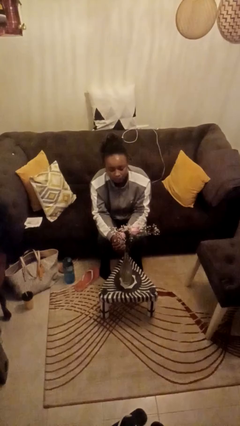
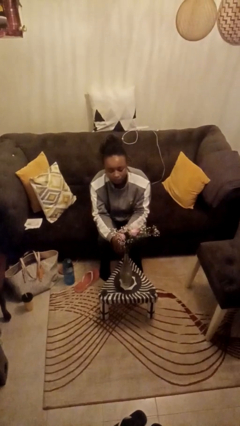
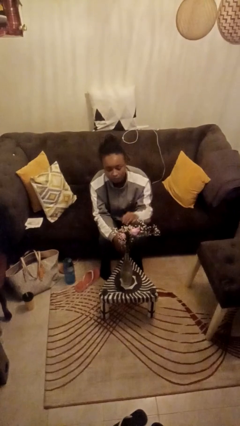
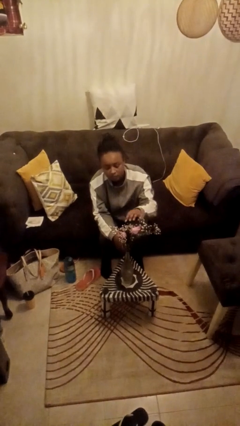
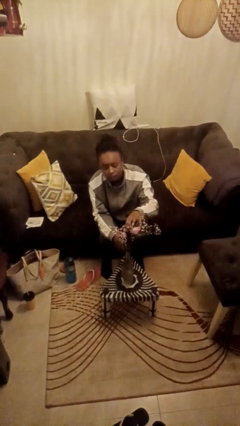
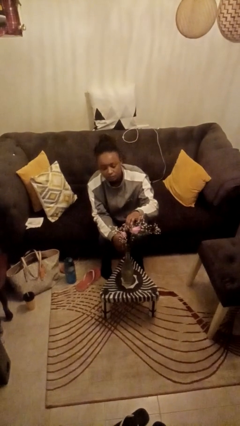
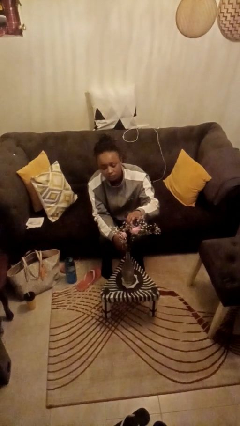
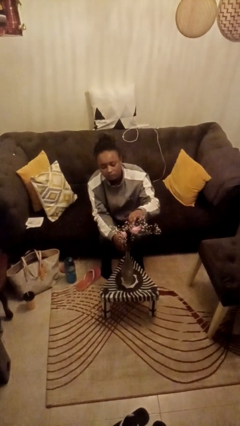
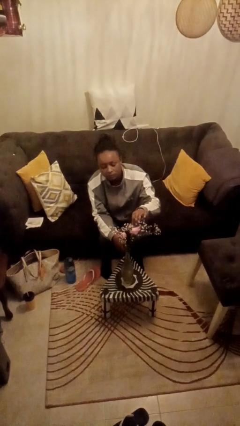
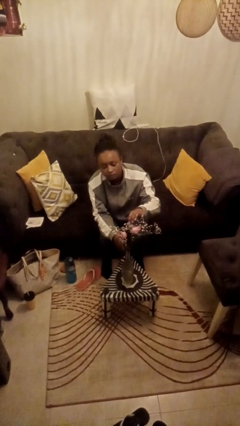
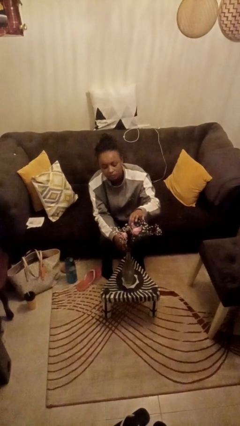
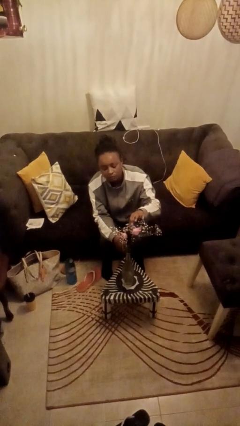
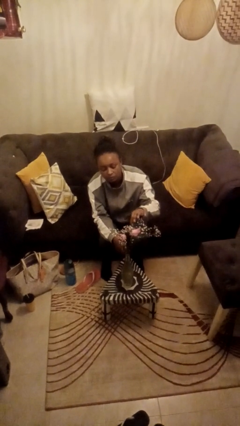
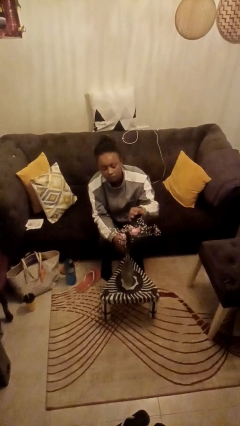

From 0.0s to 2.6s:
person arranges flowers in vase

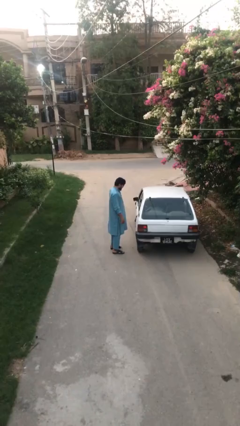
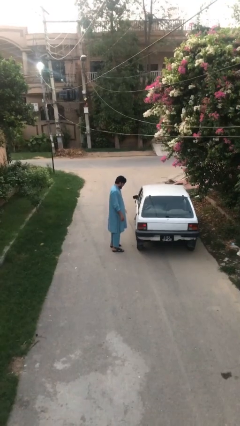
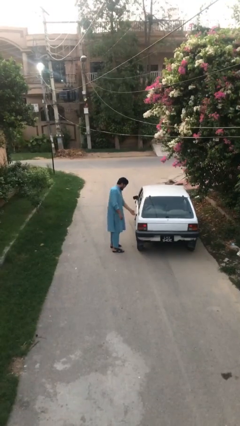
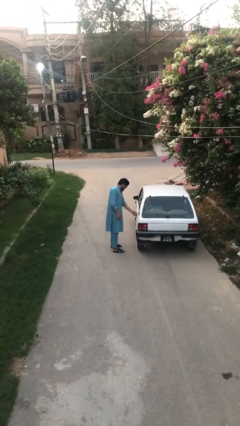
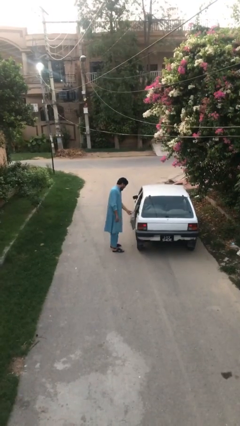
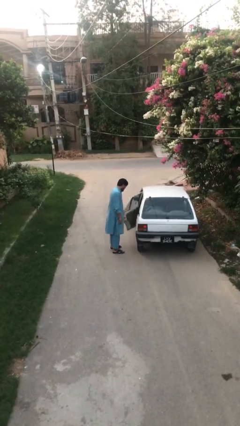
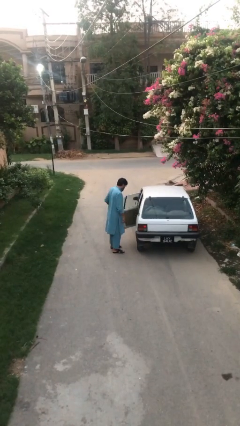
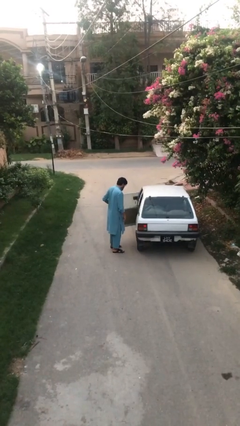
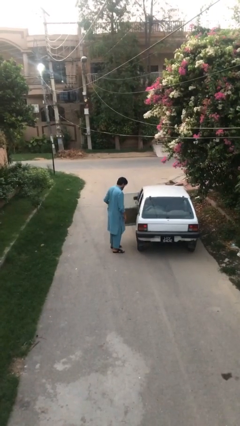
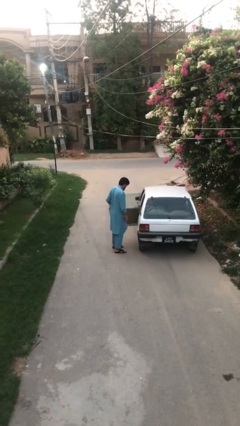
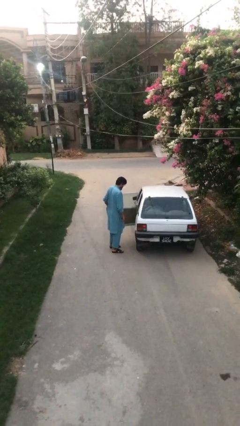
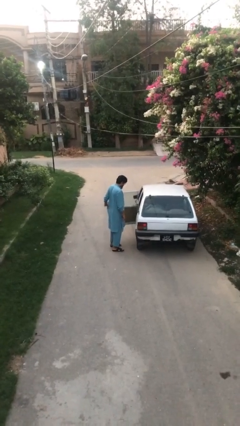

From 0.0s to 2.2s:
person opens car door

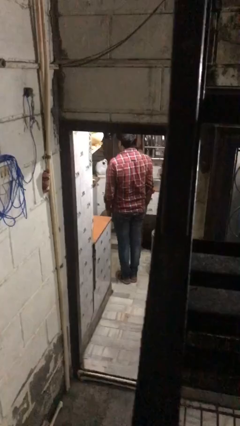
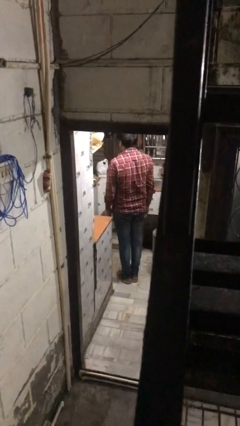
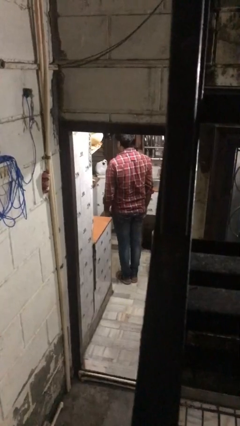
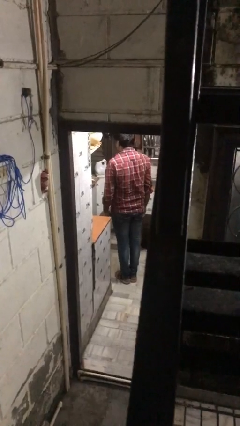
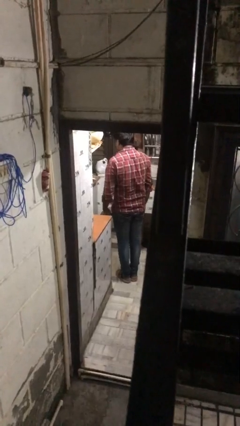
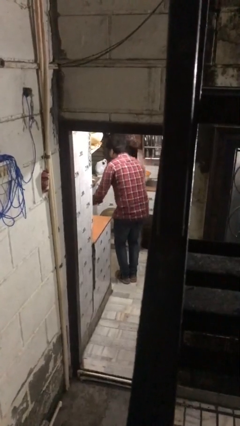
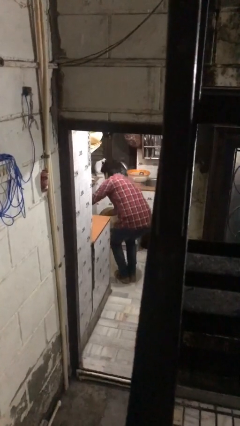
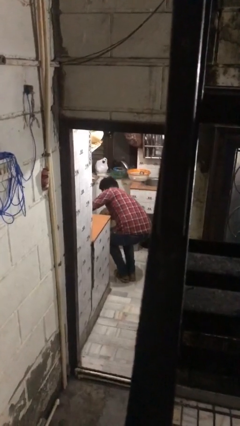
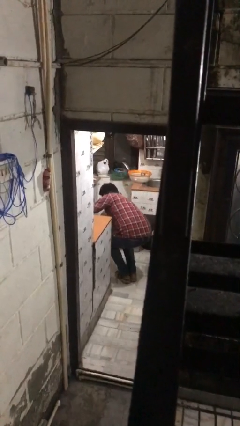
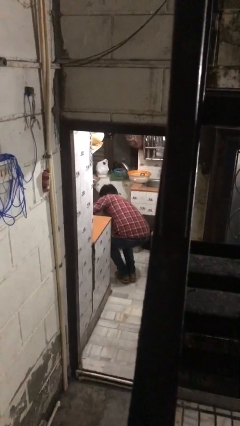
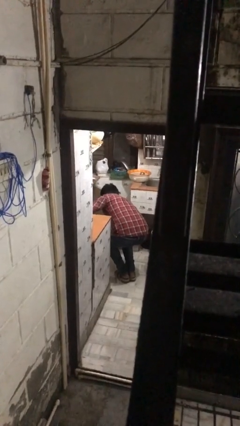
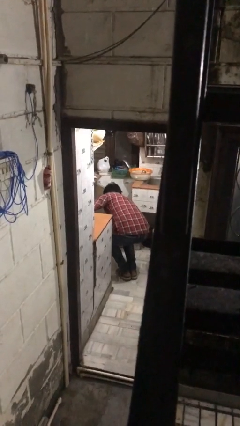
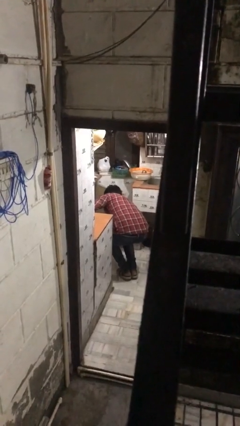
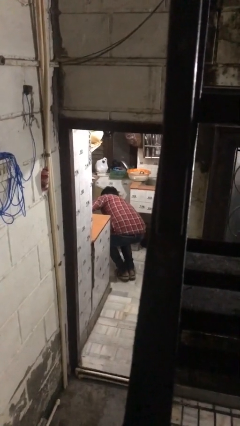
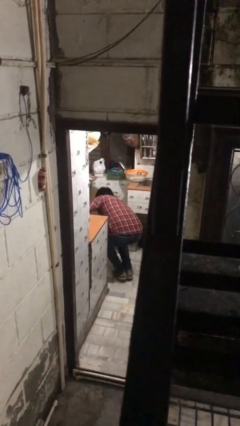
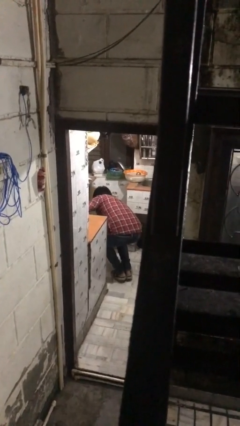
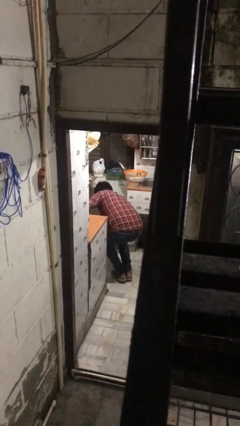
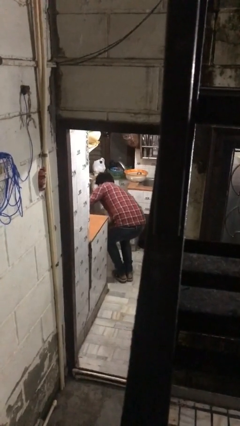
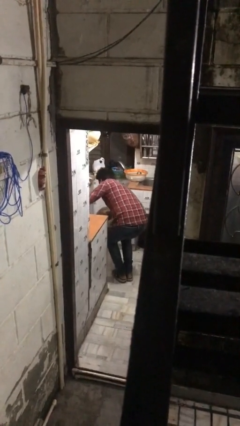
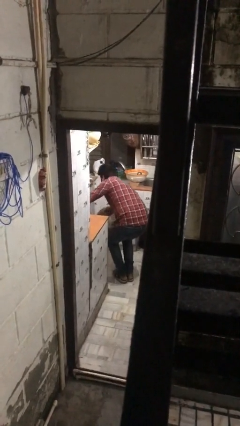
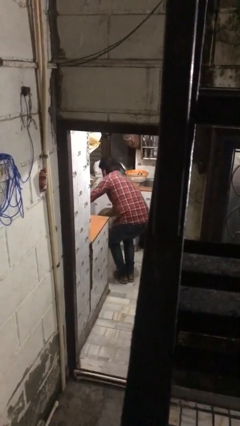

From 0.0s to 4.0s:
person searches in kitchen drawer

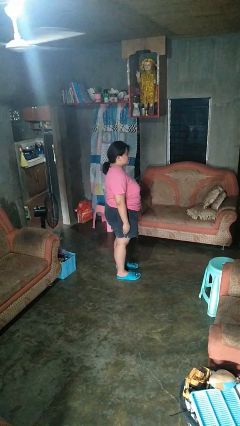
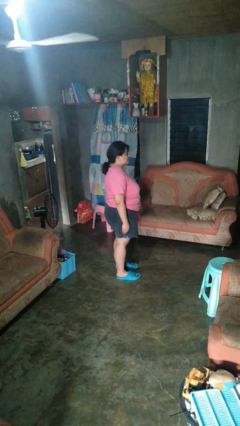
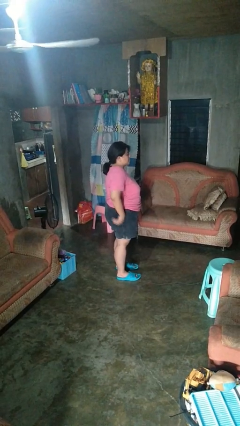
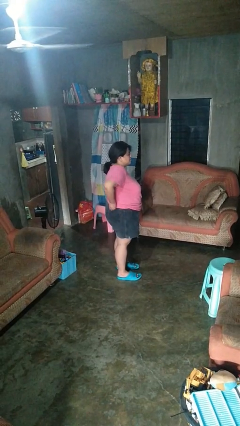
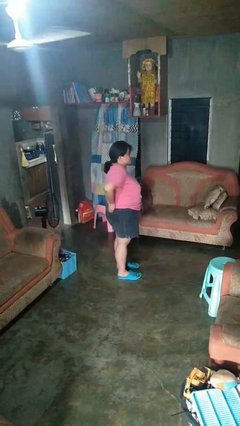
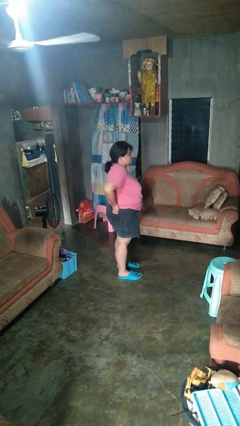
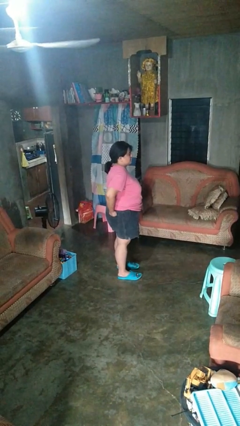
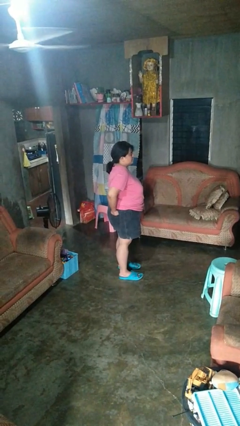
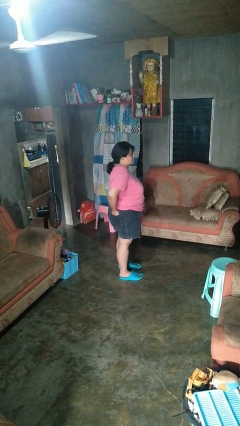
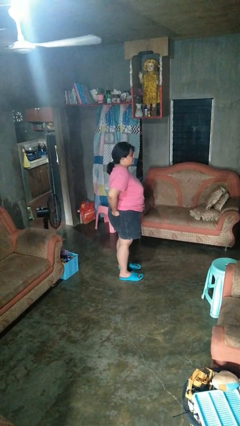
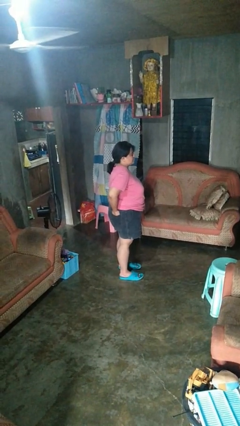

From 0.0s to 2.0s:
person puts hands in back pockets

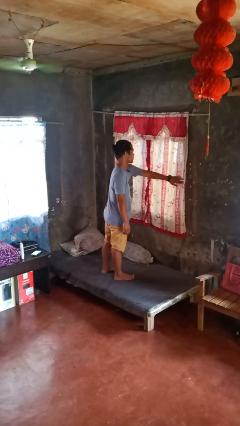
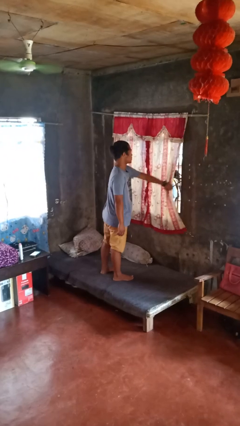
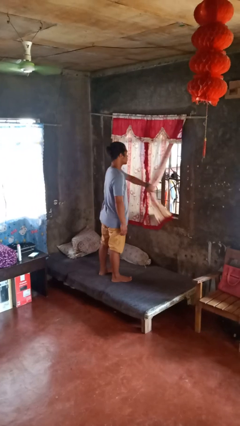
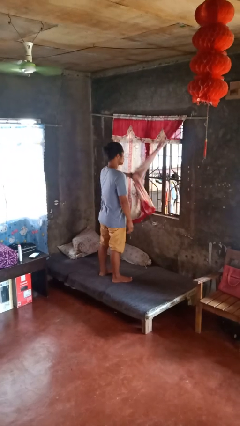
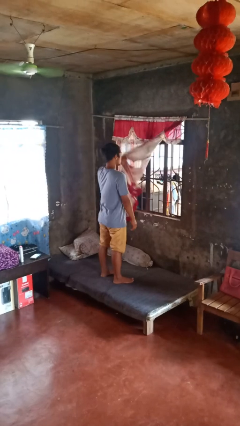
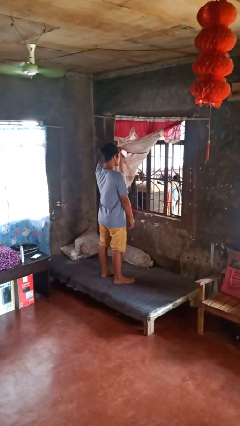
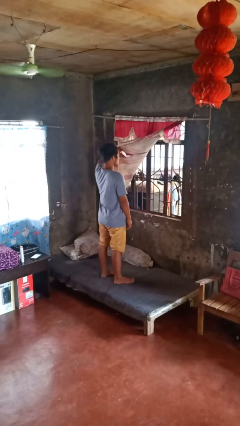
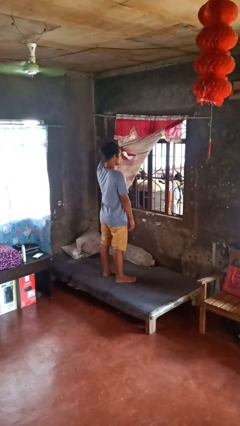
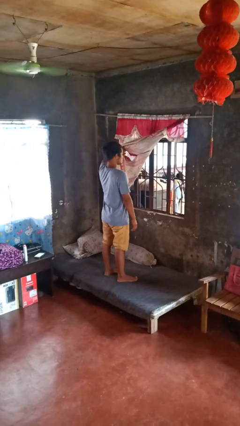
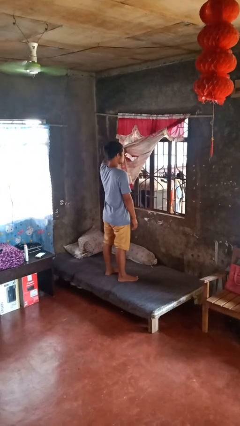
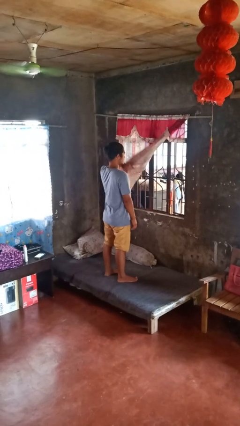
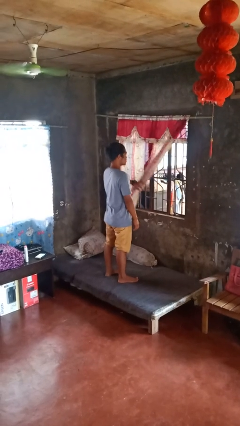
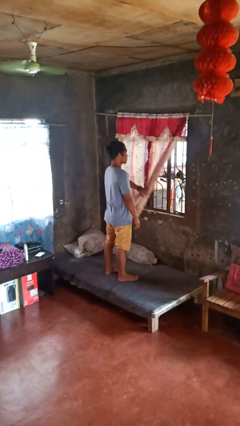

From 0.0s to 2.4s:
person opens curtains

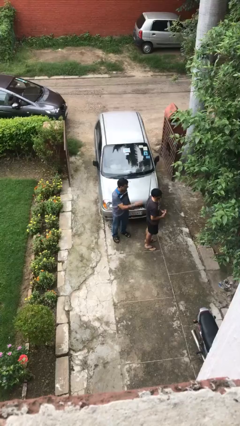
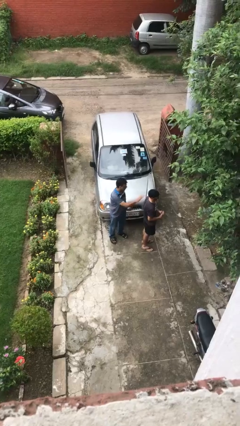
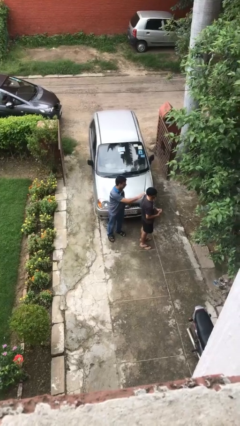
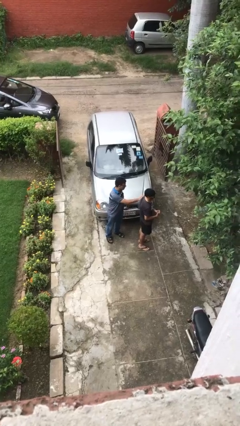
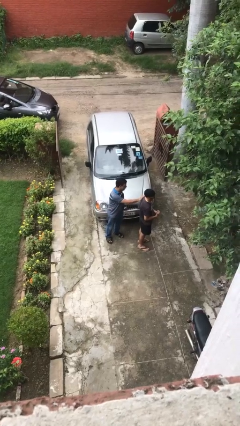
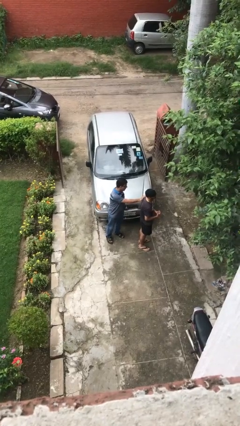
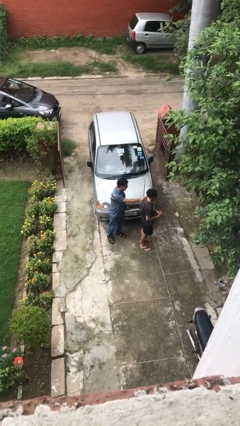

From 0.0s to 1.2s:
person touches back of person

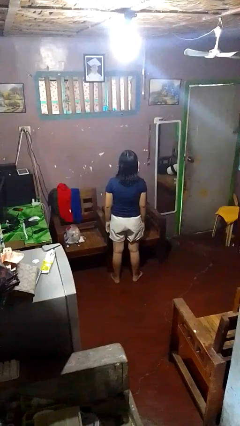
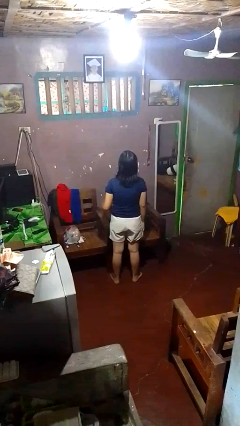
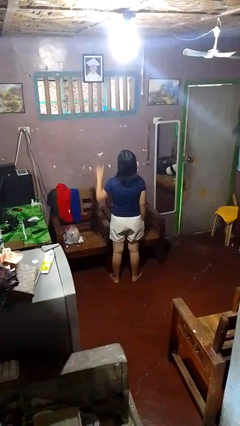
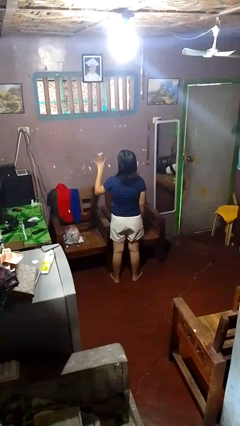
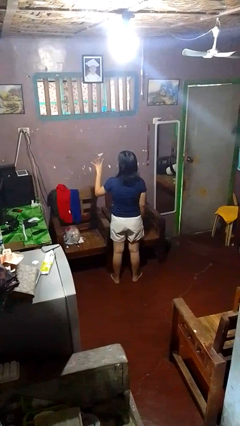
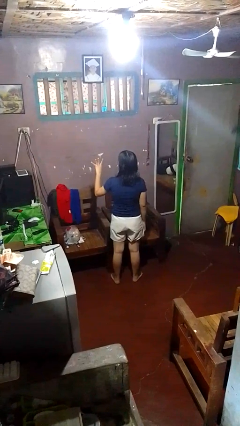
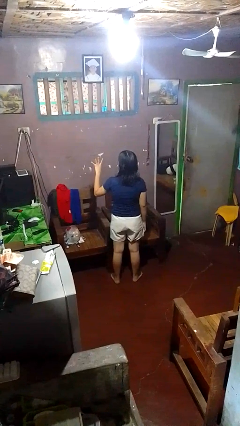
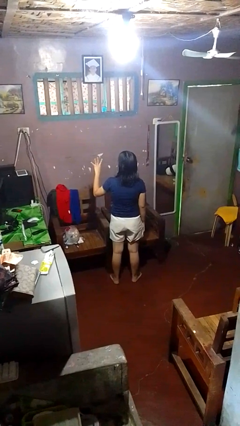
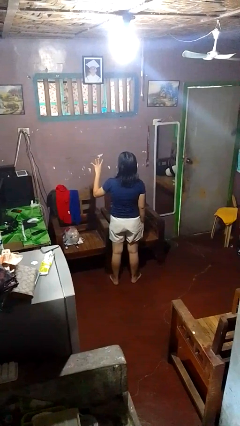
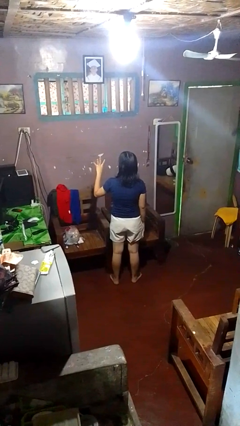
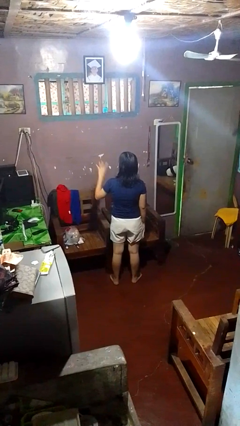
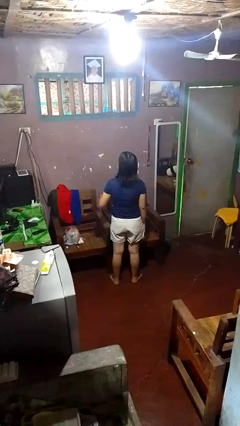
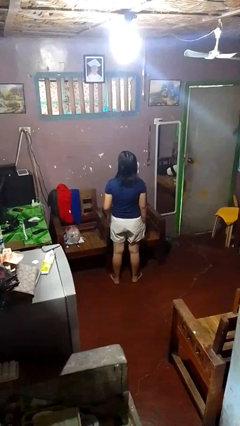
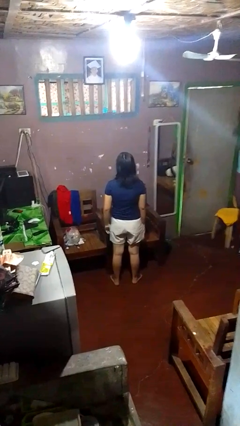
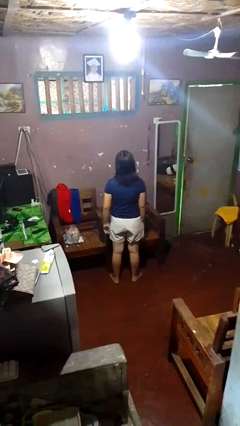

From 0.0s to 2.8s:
person gestures number four
